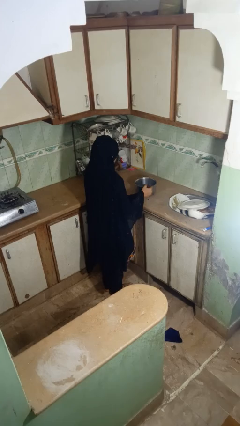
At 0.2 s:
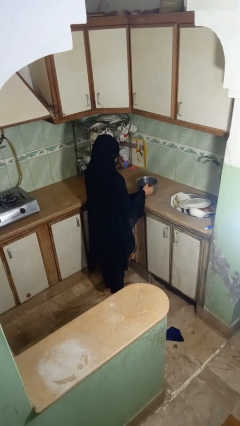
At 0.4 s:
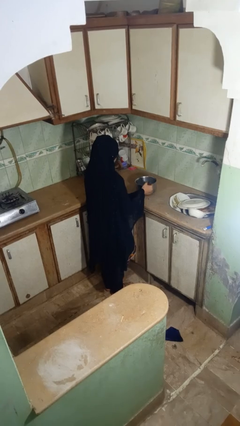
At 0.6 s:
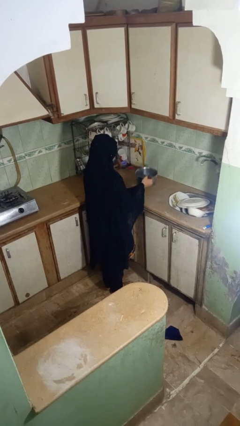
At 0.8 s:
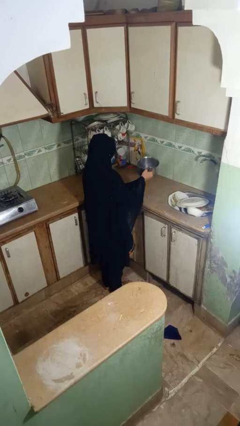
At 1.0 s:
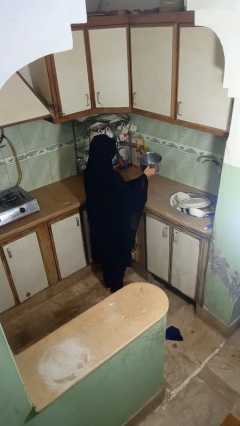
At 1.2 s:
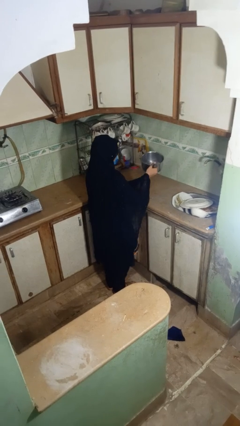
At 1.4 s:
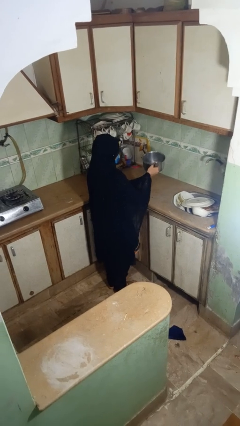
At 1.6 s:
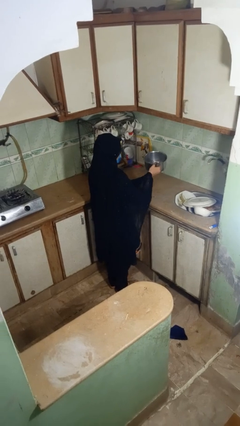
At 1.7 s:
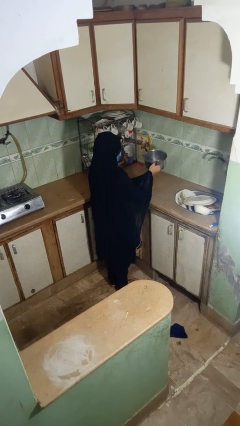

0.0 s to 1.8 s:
person picks up object from countertop

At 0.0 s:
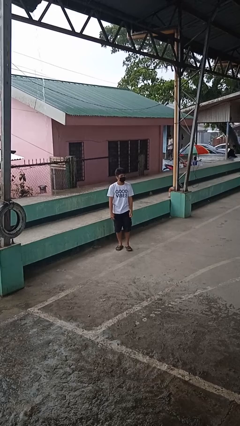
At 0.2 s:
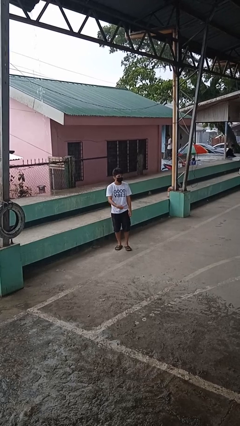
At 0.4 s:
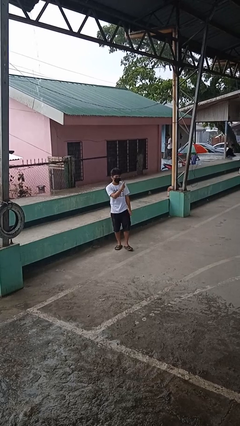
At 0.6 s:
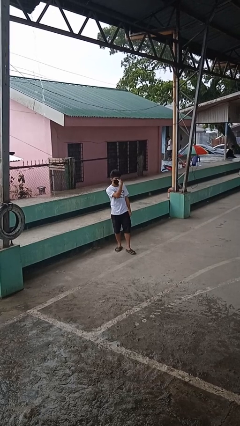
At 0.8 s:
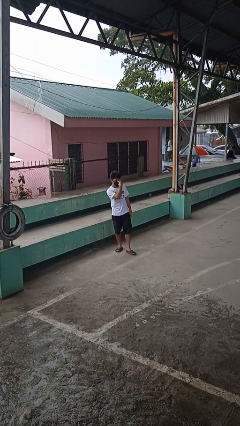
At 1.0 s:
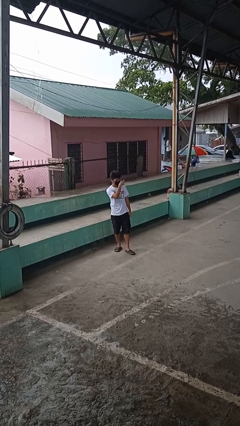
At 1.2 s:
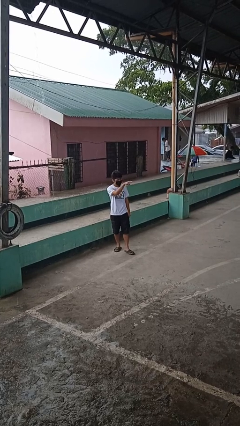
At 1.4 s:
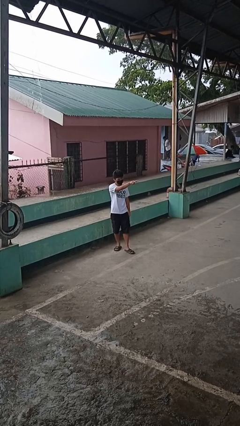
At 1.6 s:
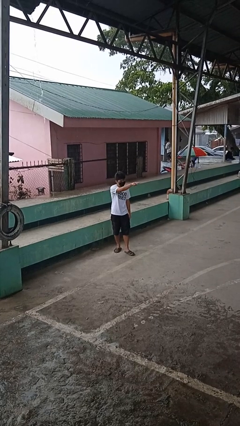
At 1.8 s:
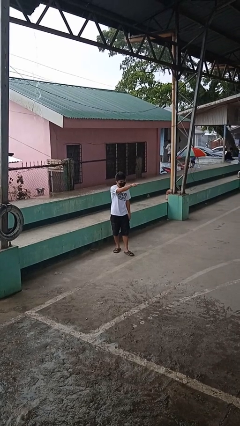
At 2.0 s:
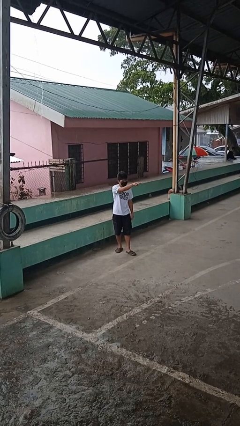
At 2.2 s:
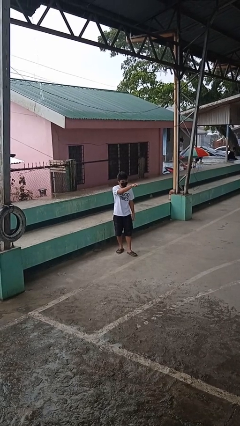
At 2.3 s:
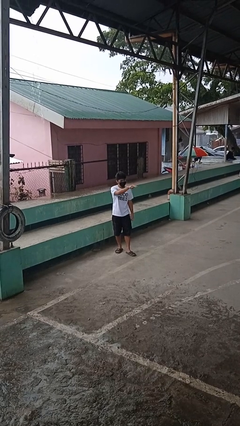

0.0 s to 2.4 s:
person gestures watch closely

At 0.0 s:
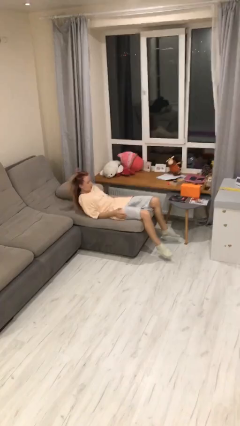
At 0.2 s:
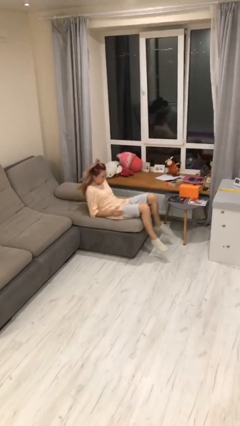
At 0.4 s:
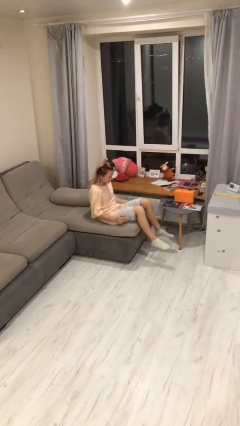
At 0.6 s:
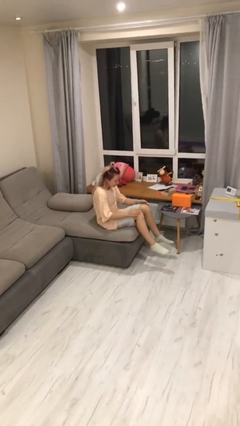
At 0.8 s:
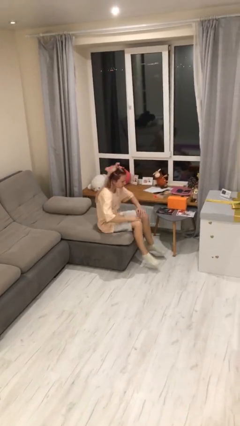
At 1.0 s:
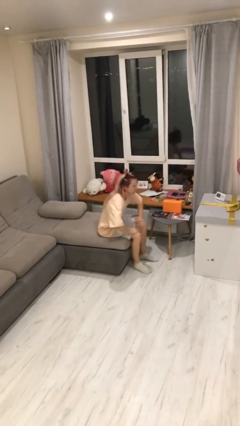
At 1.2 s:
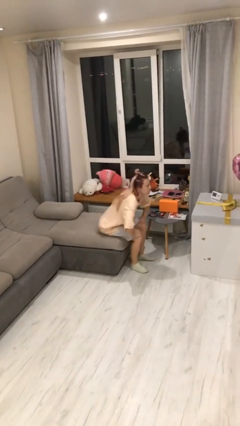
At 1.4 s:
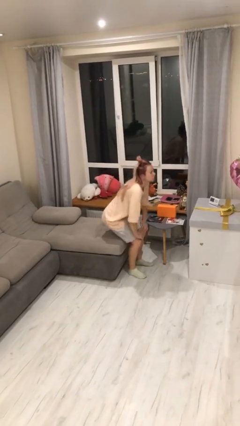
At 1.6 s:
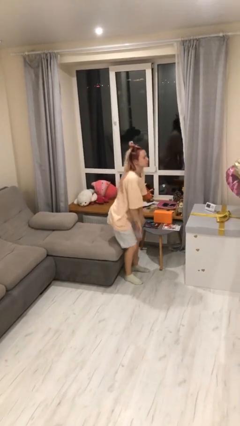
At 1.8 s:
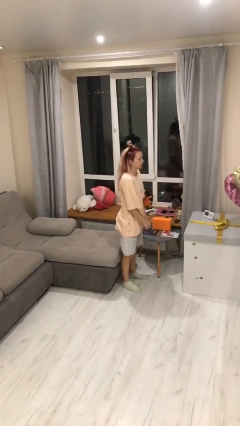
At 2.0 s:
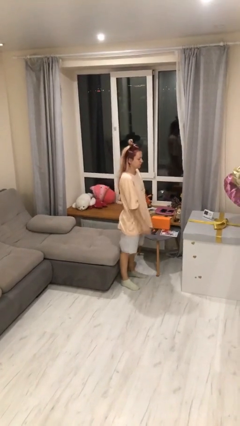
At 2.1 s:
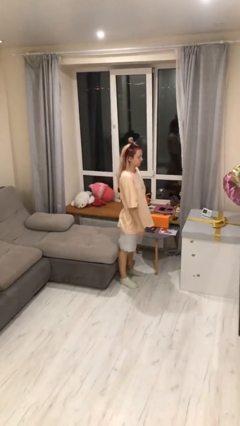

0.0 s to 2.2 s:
person stands up

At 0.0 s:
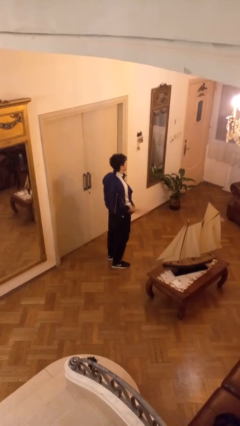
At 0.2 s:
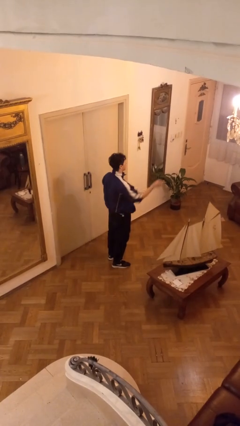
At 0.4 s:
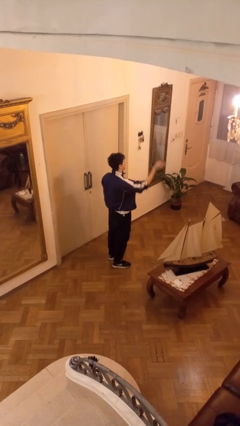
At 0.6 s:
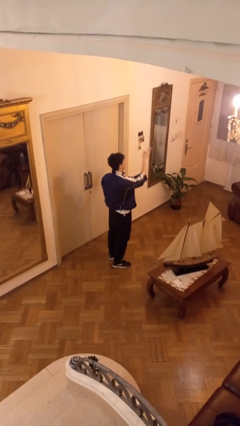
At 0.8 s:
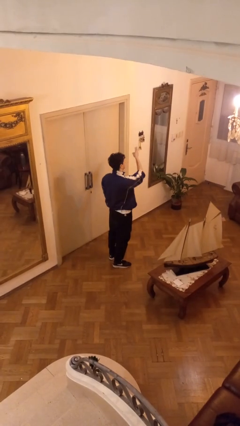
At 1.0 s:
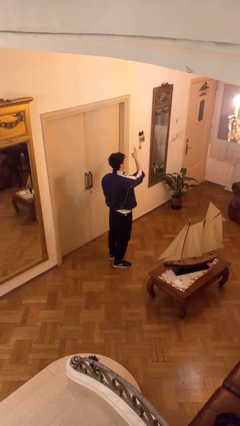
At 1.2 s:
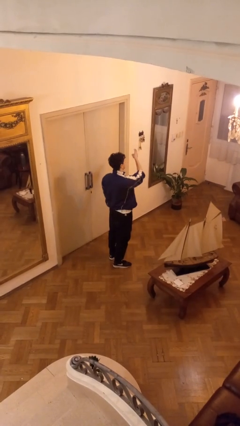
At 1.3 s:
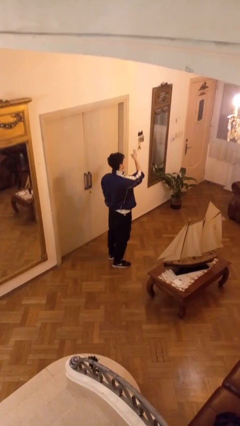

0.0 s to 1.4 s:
person gestures swipe left

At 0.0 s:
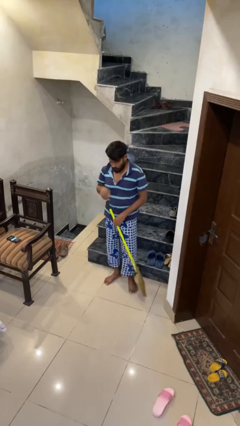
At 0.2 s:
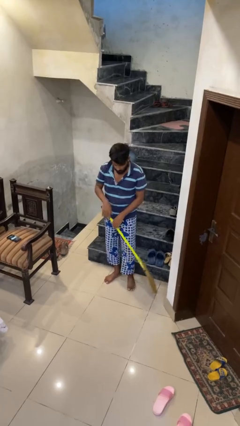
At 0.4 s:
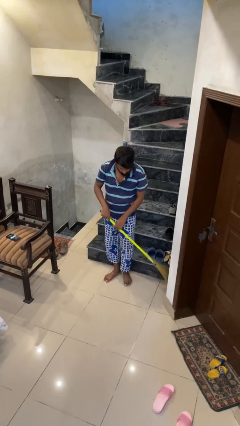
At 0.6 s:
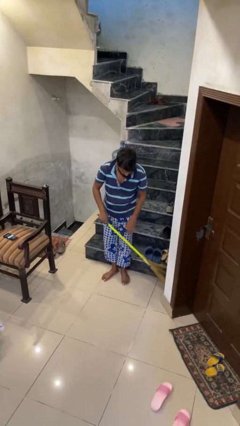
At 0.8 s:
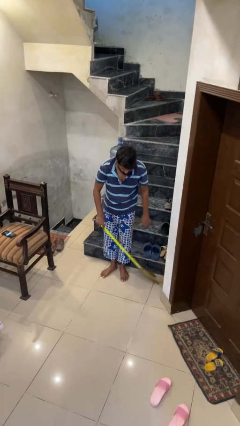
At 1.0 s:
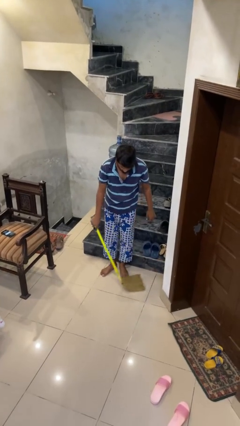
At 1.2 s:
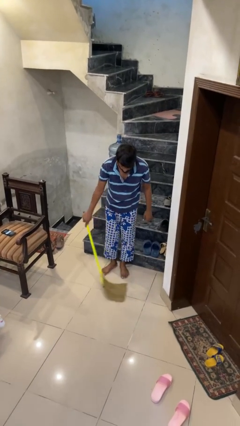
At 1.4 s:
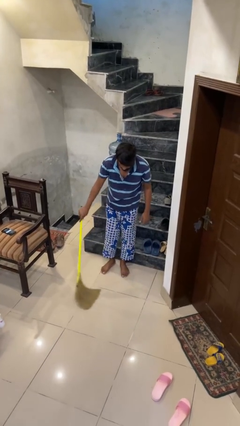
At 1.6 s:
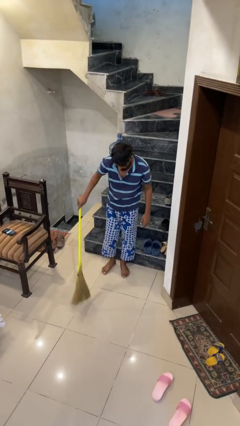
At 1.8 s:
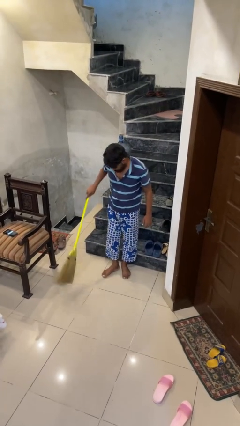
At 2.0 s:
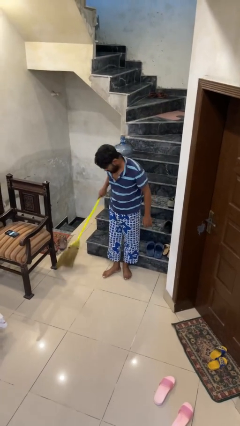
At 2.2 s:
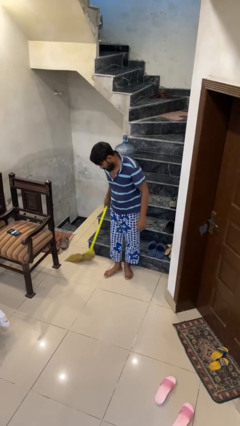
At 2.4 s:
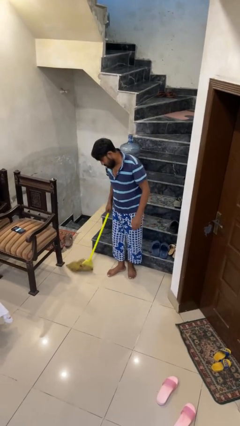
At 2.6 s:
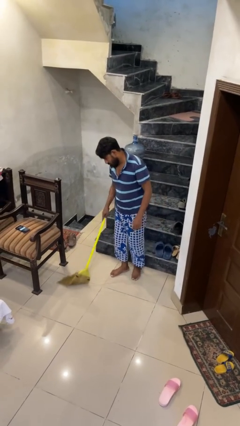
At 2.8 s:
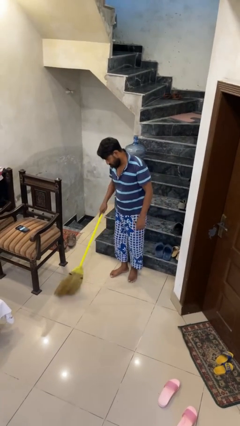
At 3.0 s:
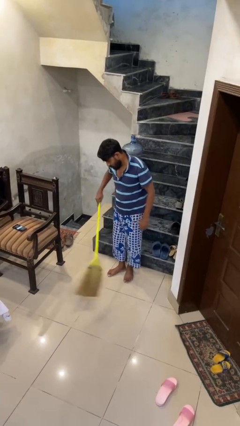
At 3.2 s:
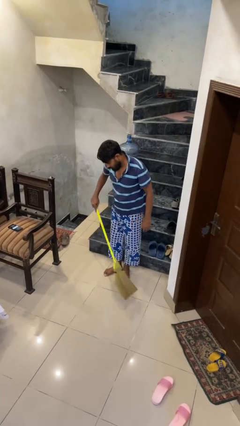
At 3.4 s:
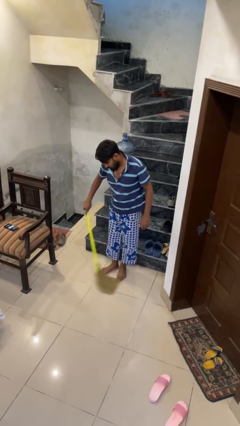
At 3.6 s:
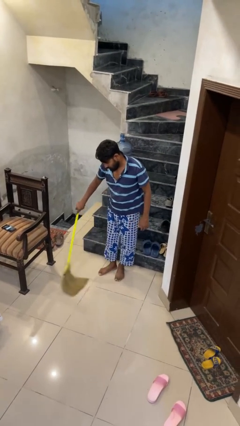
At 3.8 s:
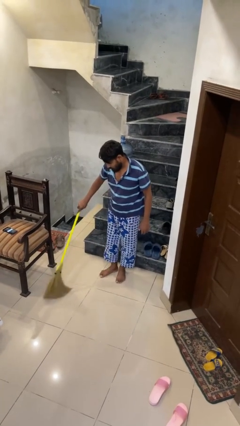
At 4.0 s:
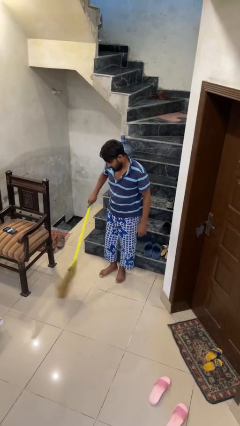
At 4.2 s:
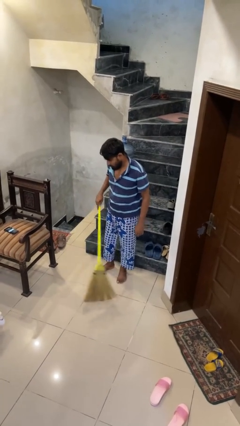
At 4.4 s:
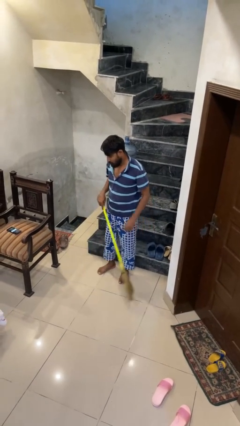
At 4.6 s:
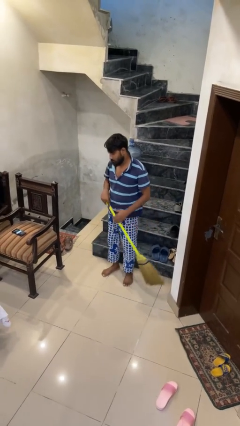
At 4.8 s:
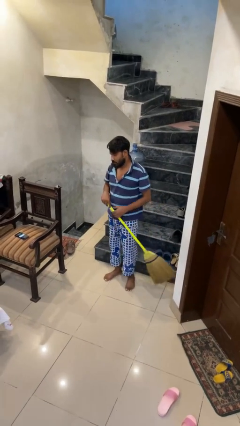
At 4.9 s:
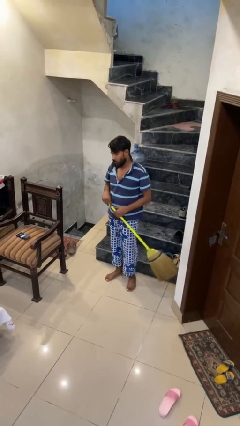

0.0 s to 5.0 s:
person sweeps floor

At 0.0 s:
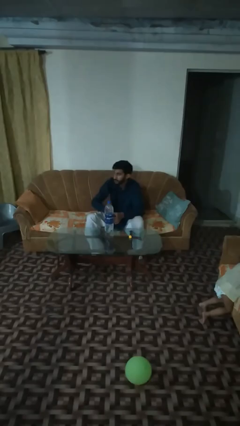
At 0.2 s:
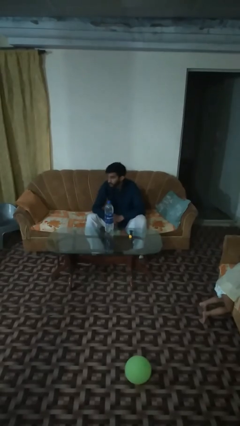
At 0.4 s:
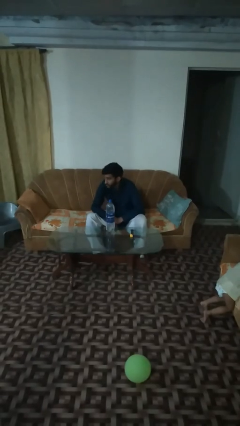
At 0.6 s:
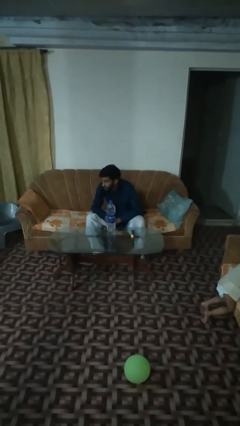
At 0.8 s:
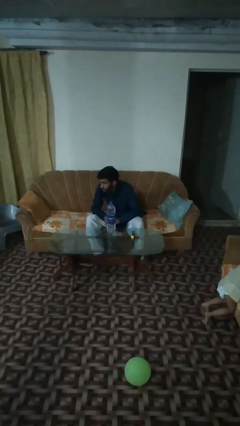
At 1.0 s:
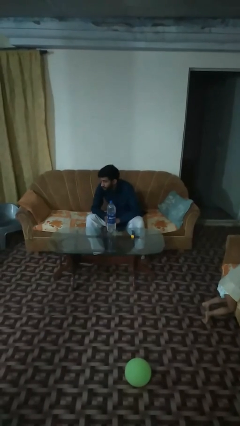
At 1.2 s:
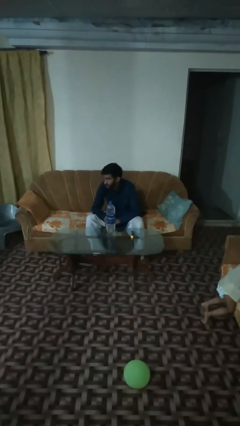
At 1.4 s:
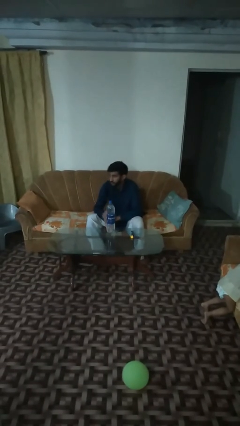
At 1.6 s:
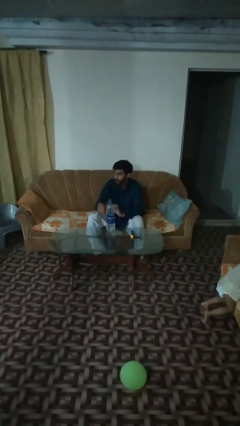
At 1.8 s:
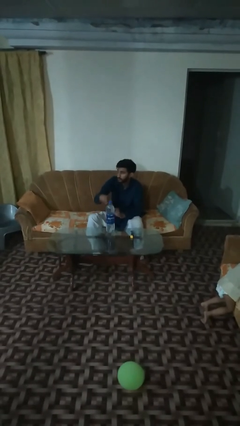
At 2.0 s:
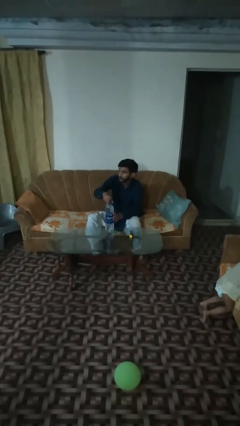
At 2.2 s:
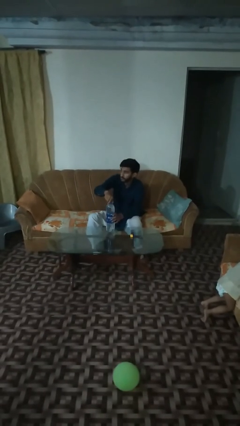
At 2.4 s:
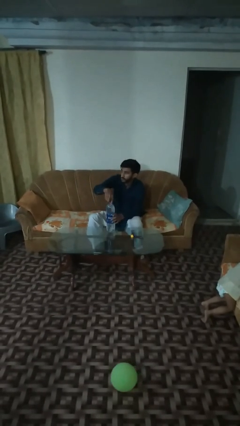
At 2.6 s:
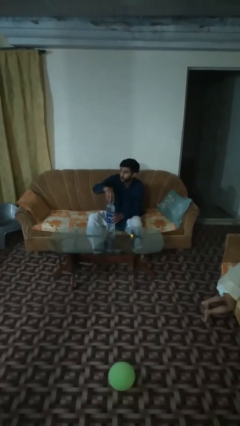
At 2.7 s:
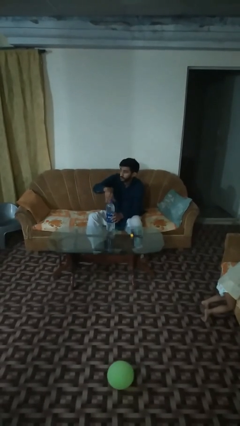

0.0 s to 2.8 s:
person unscrews lid from bottle

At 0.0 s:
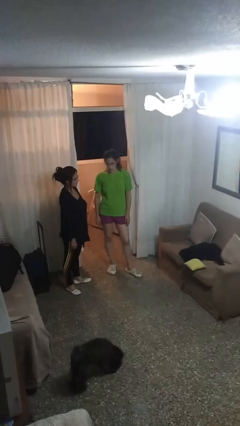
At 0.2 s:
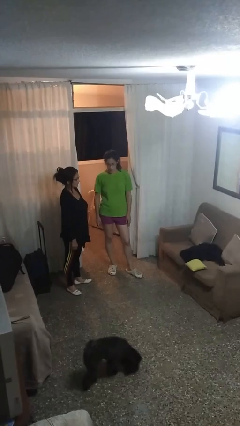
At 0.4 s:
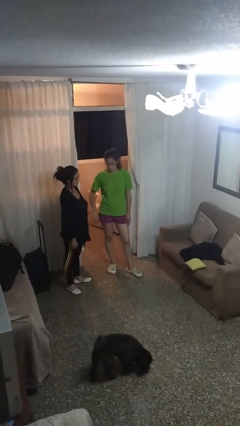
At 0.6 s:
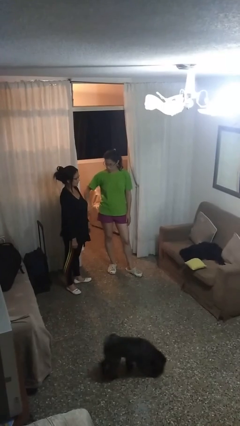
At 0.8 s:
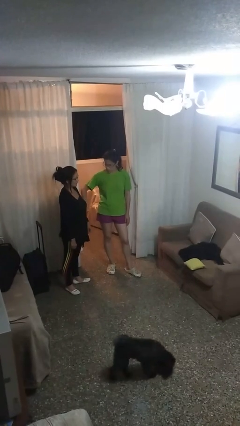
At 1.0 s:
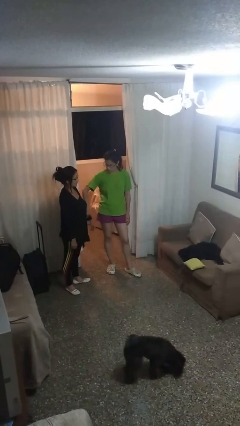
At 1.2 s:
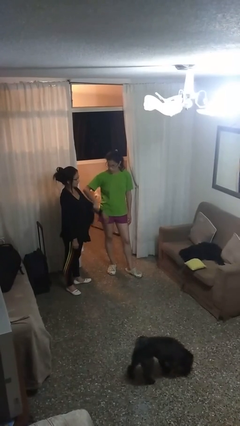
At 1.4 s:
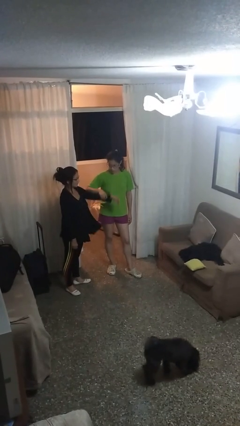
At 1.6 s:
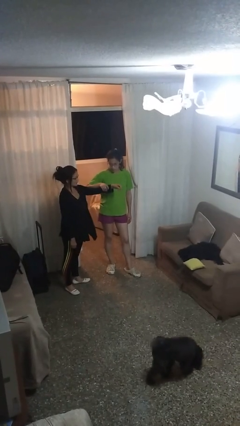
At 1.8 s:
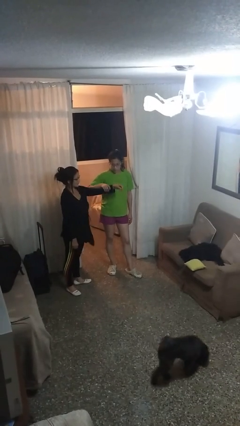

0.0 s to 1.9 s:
person grabs person by forearm
